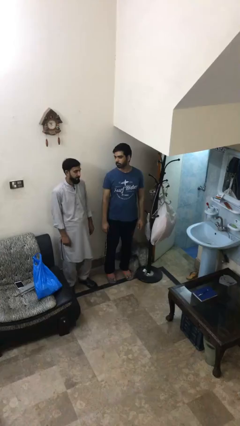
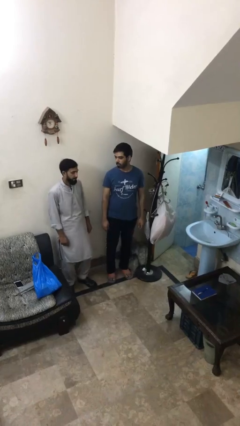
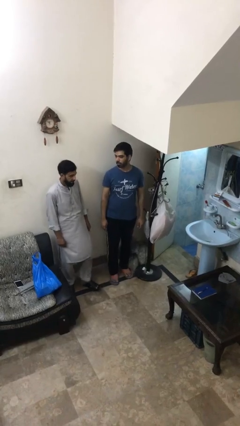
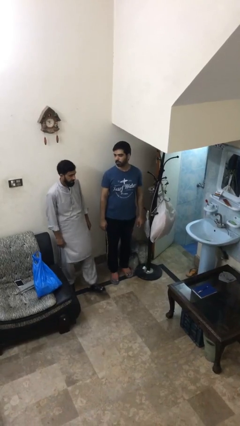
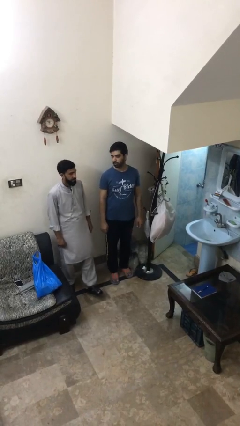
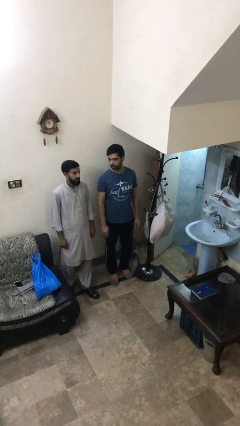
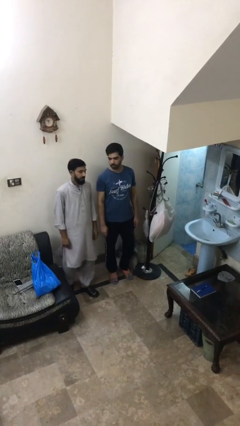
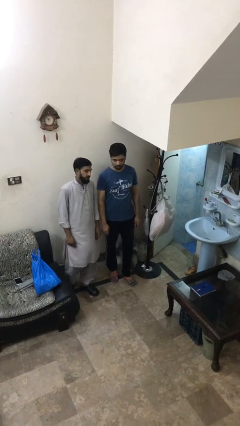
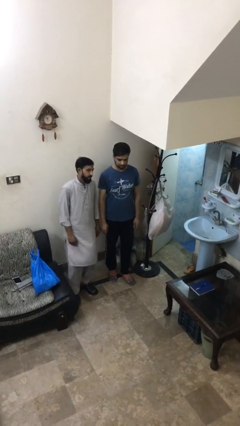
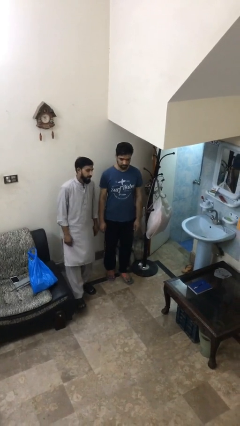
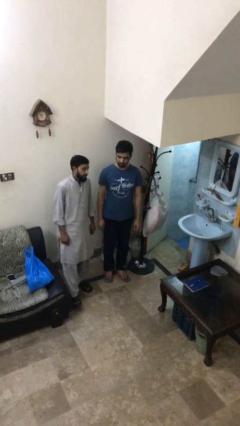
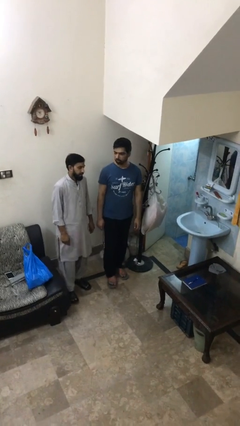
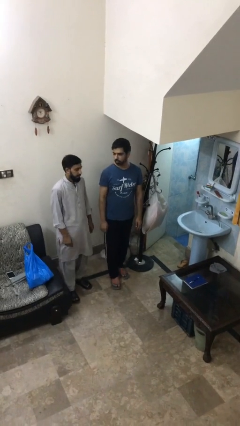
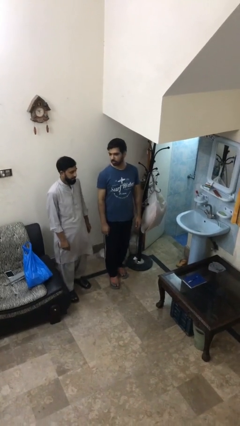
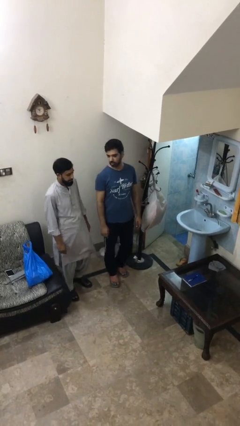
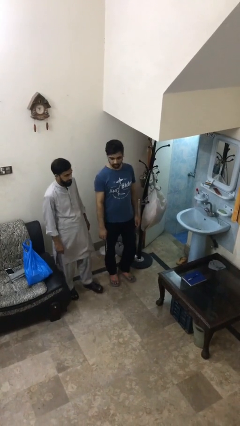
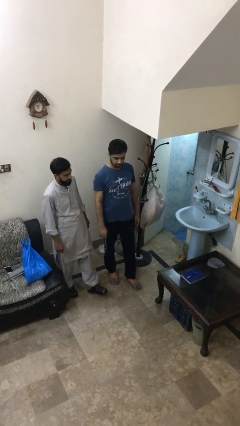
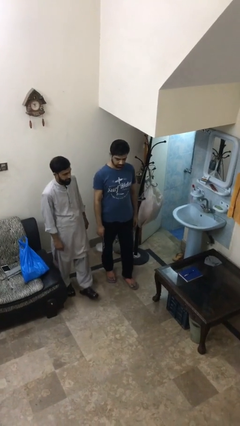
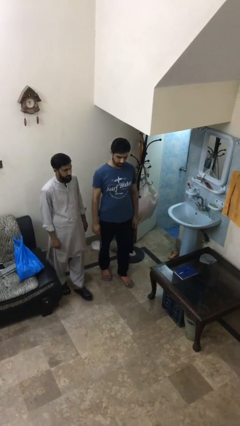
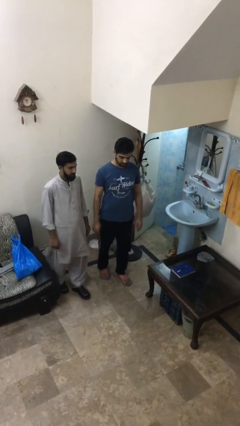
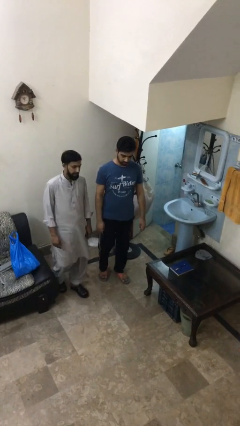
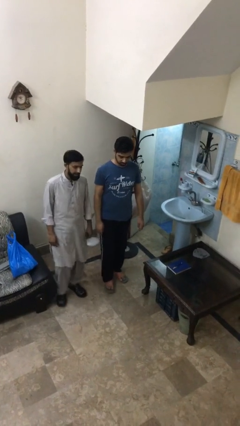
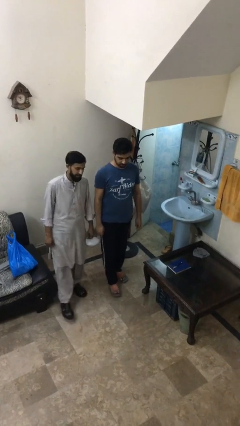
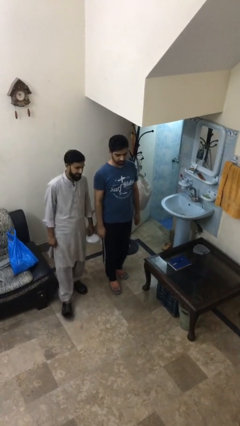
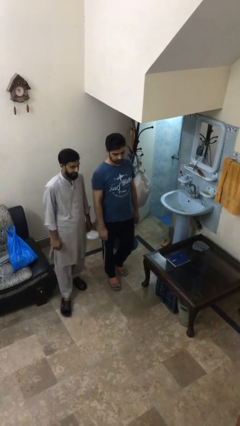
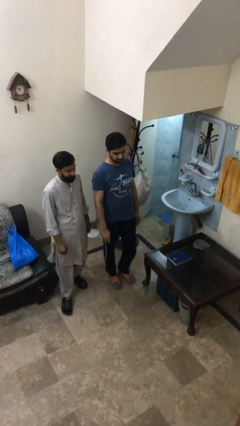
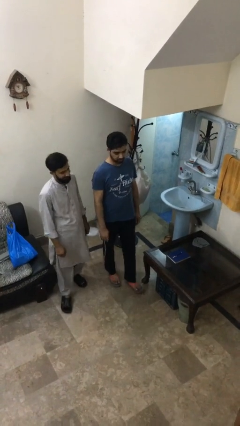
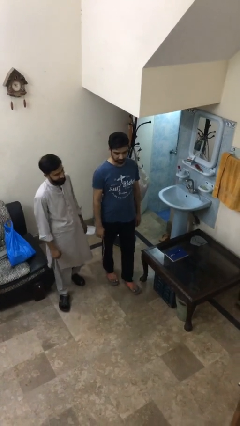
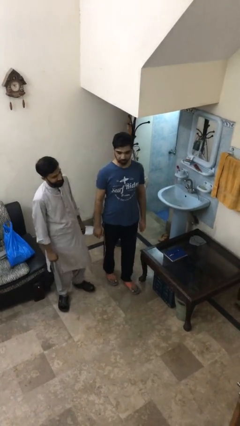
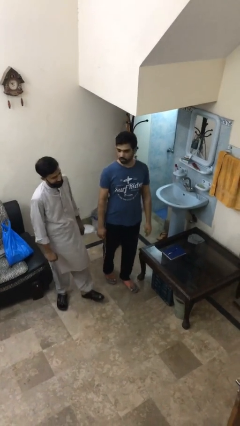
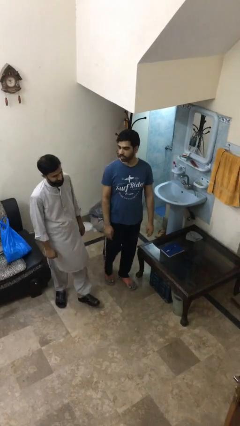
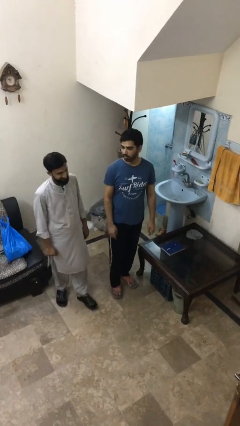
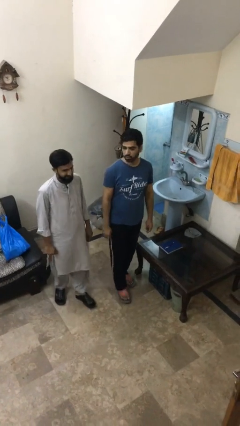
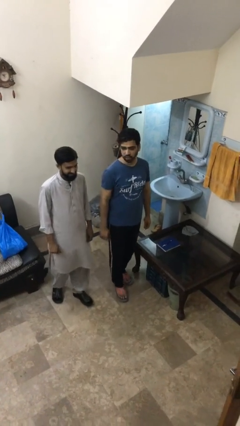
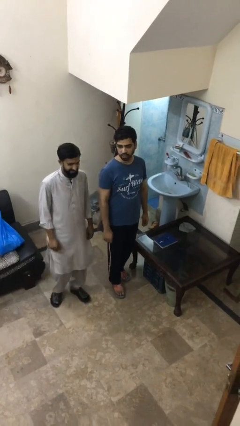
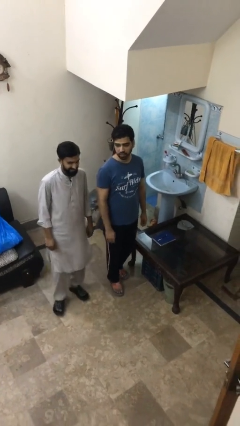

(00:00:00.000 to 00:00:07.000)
person talks to person

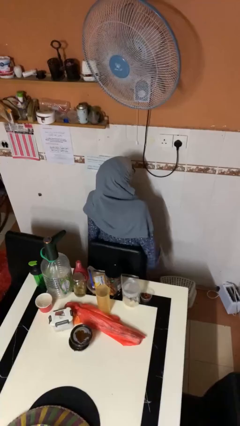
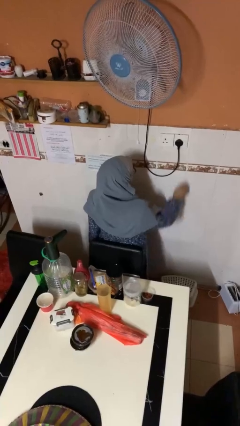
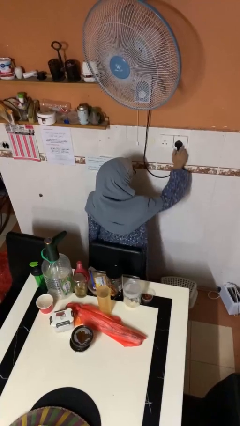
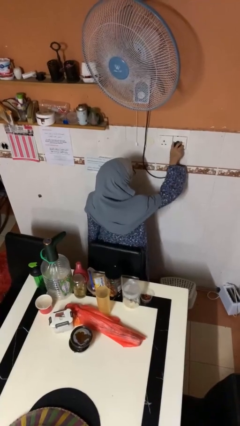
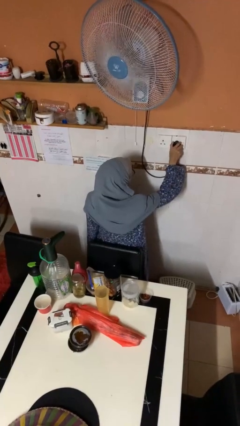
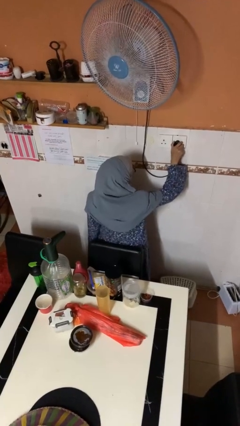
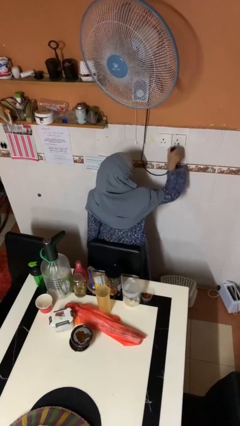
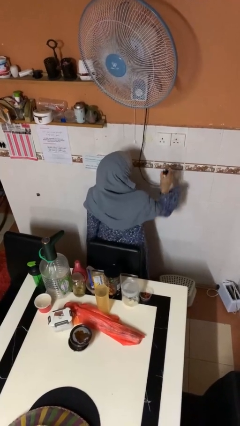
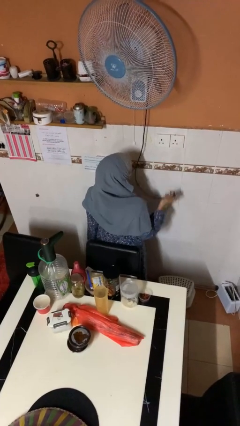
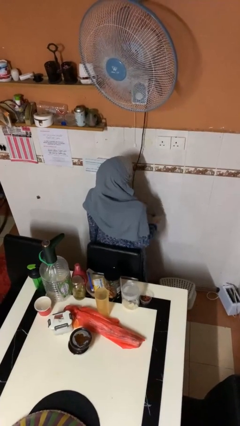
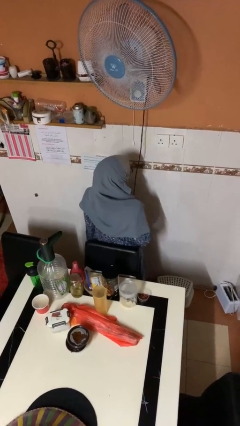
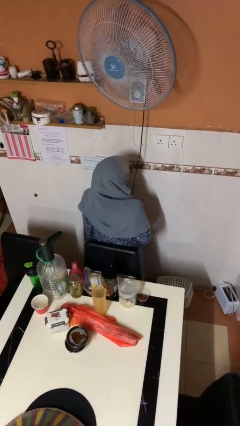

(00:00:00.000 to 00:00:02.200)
person unplugs from electrical socket

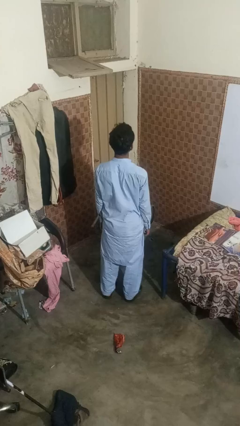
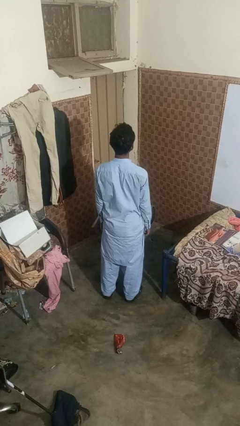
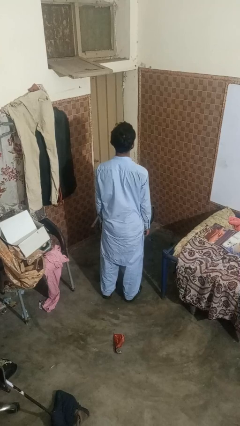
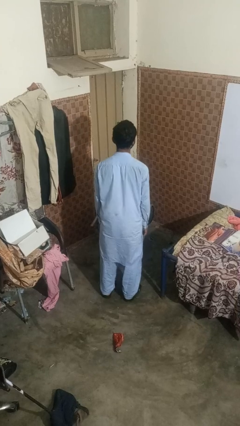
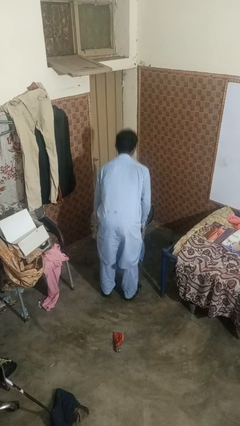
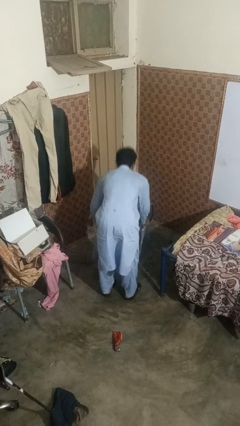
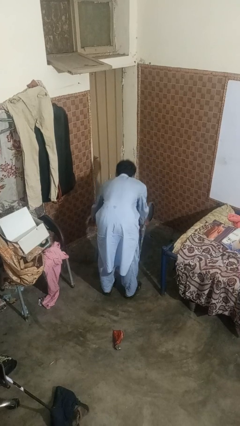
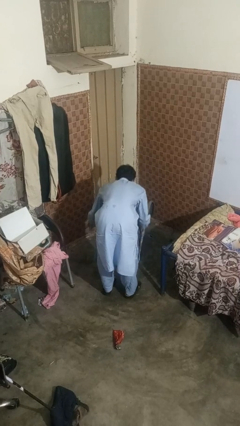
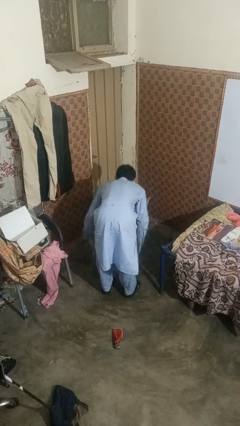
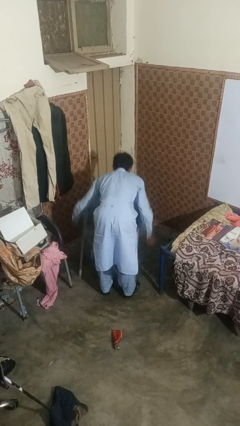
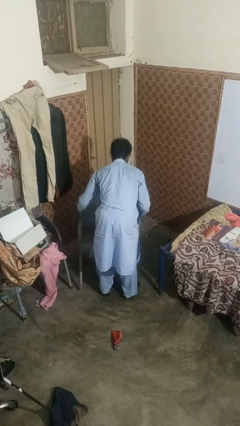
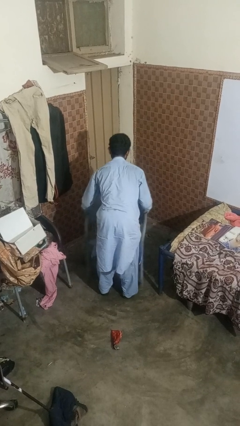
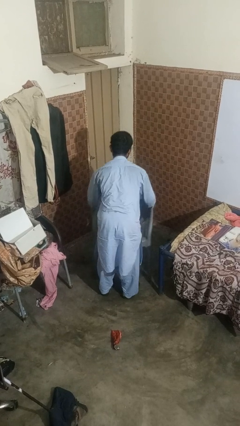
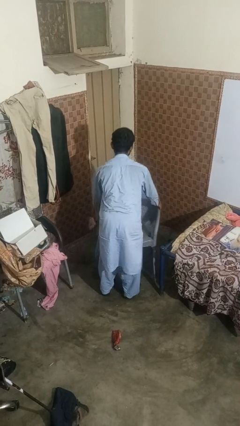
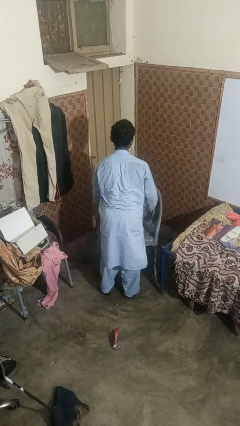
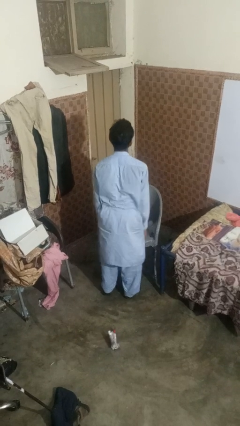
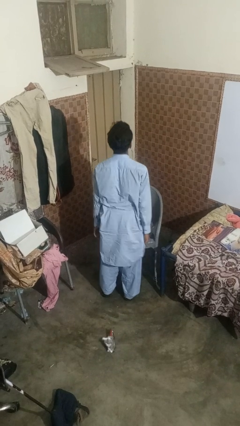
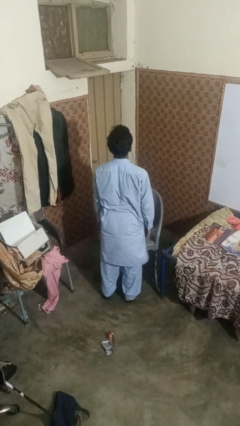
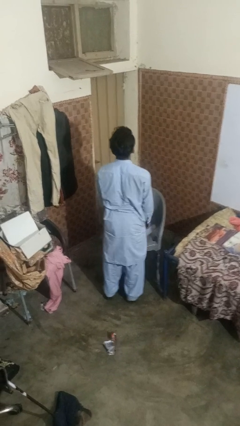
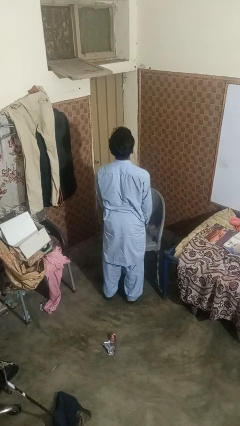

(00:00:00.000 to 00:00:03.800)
person sets upright furniture

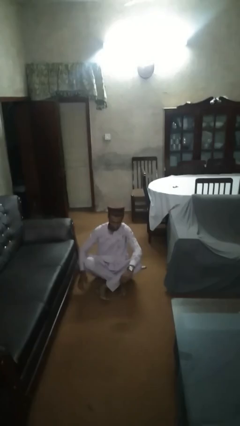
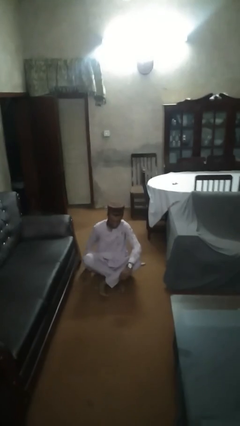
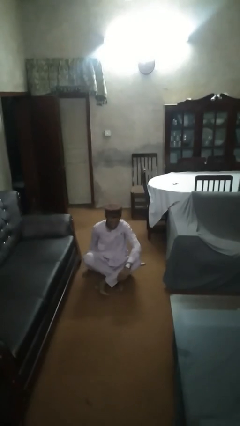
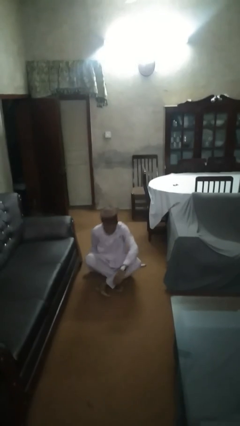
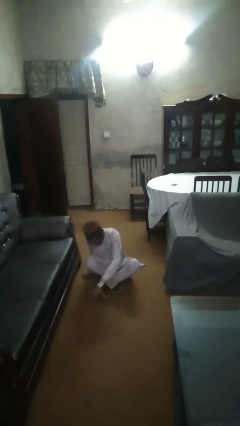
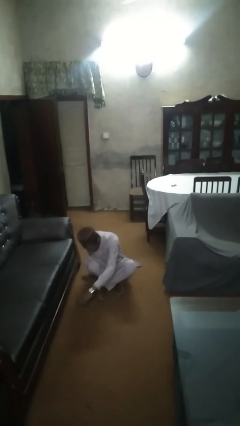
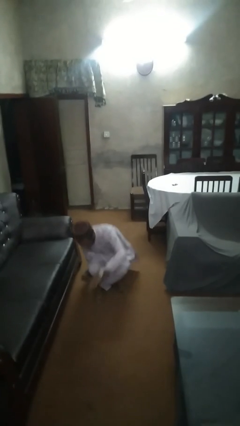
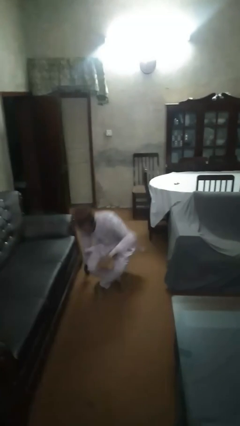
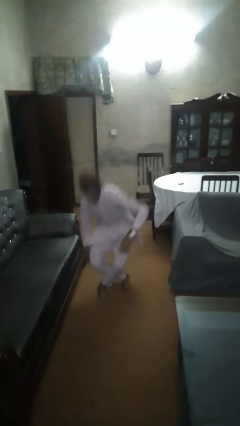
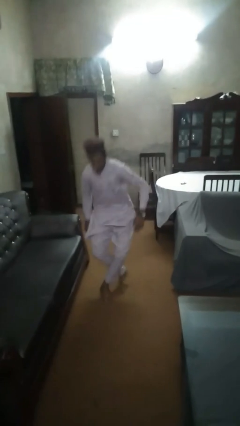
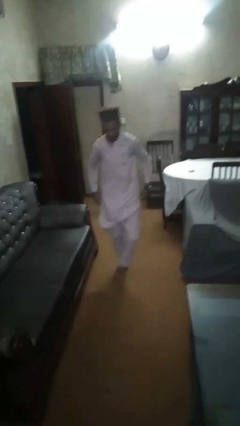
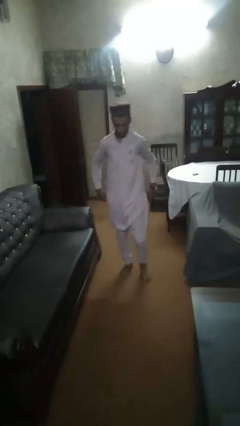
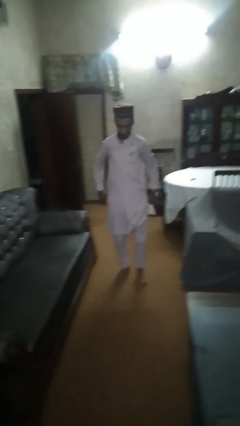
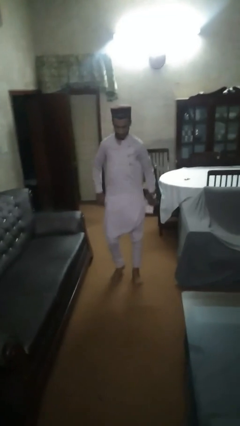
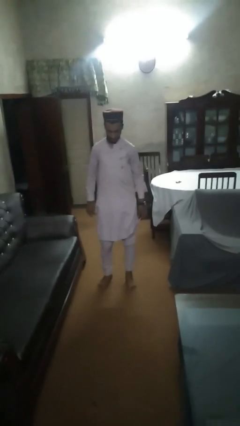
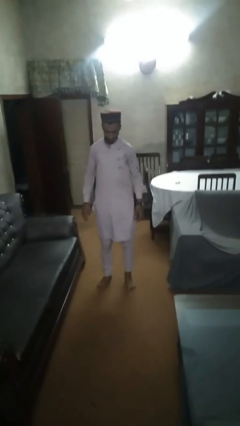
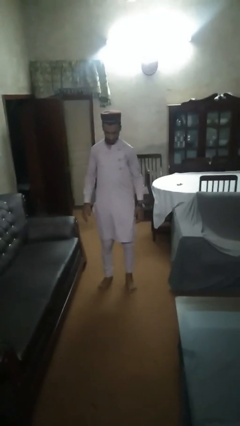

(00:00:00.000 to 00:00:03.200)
person stands up from floor

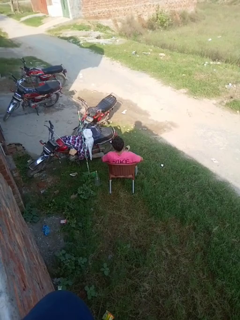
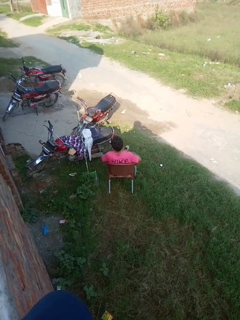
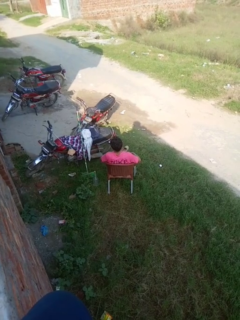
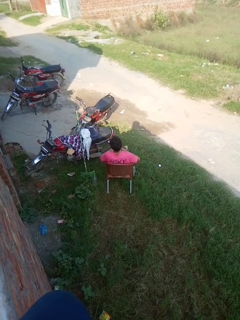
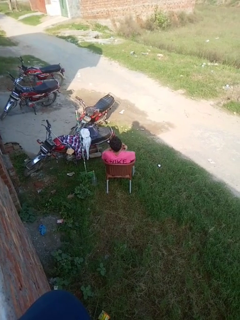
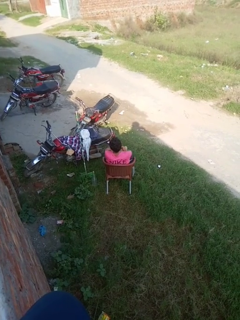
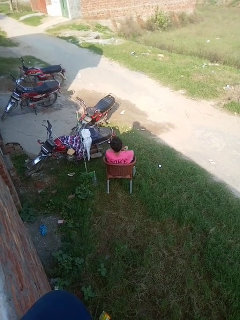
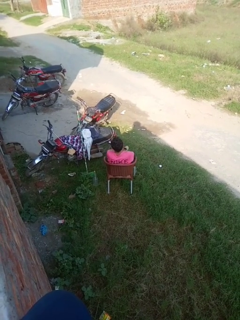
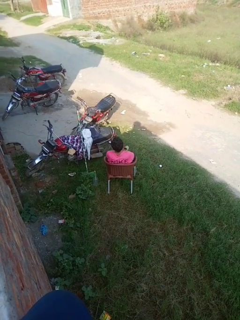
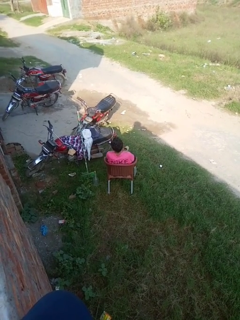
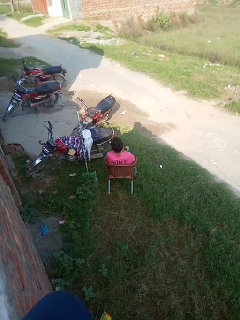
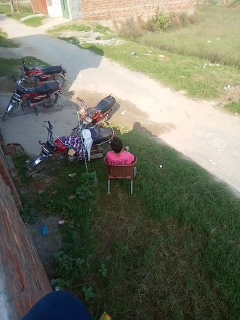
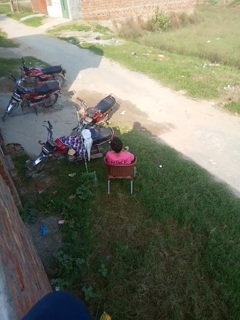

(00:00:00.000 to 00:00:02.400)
person crosses arms
